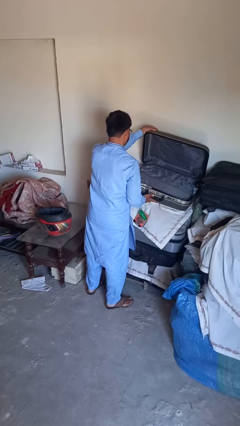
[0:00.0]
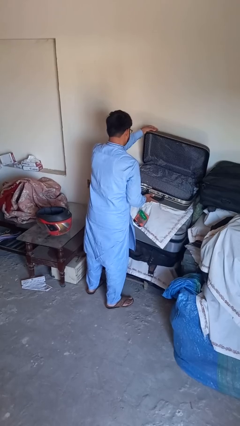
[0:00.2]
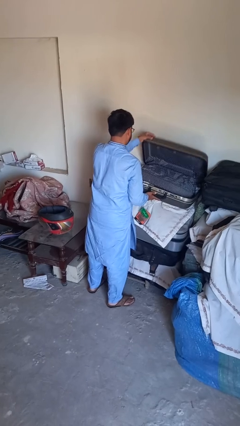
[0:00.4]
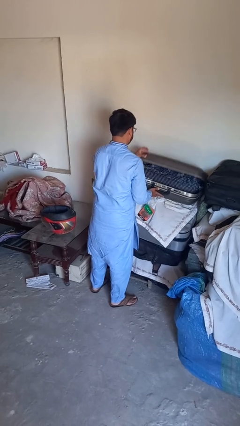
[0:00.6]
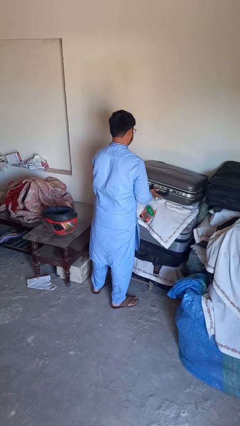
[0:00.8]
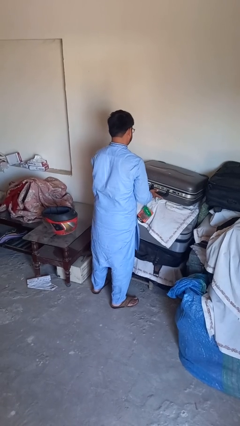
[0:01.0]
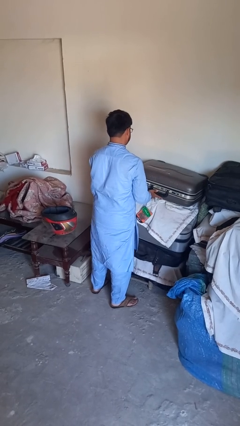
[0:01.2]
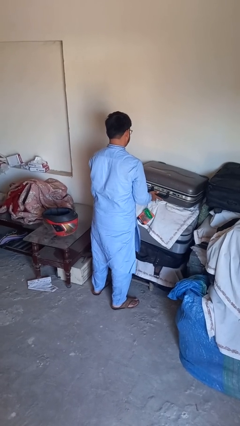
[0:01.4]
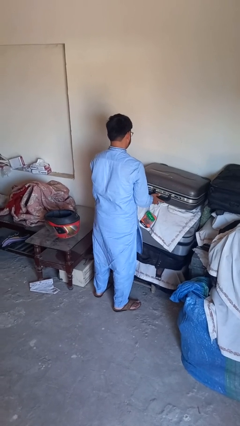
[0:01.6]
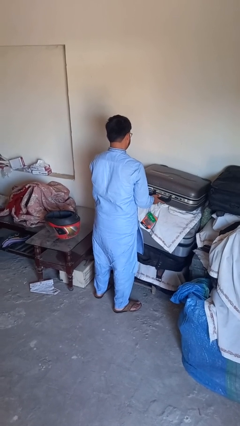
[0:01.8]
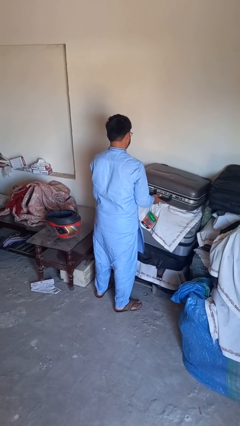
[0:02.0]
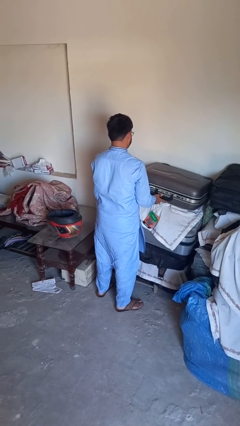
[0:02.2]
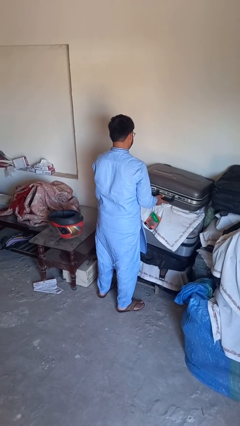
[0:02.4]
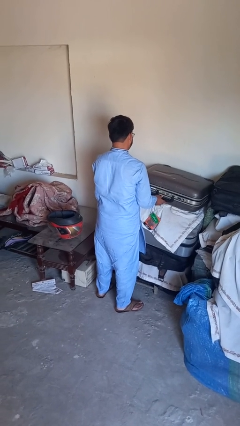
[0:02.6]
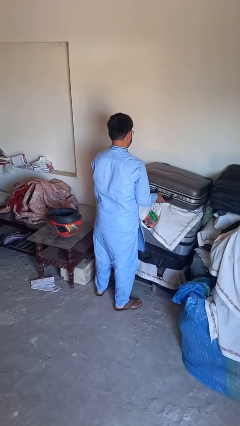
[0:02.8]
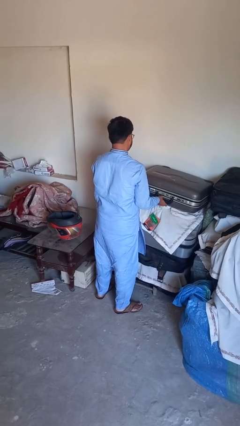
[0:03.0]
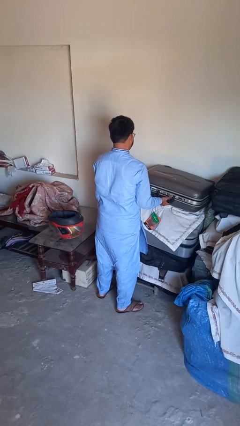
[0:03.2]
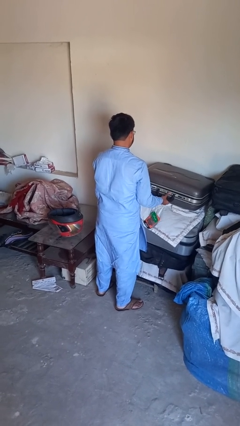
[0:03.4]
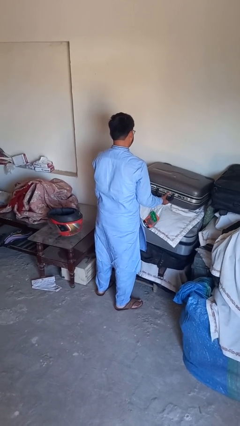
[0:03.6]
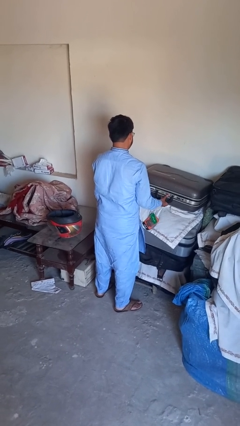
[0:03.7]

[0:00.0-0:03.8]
person closes suitcase

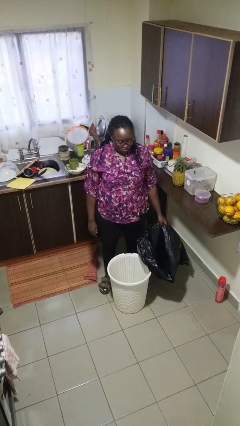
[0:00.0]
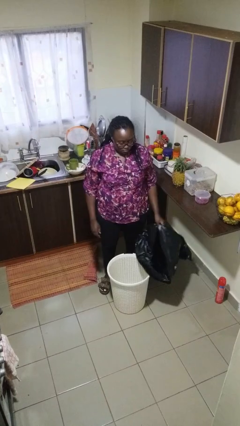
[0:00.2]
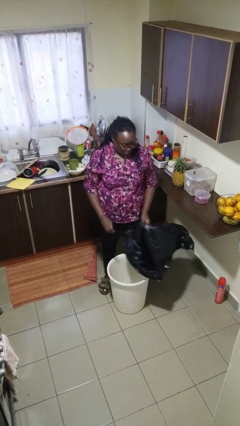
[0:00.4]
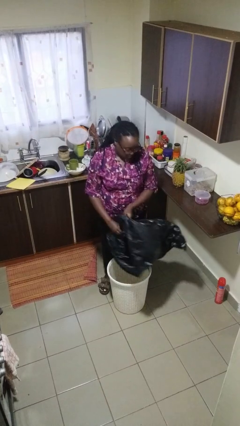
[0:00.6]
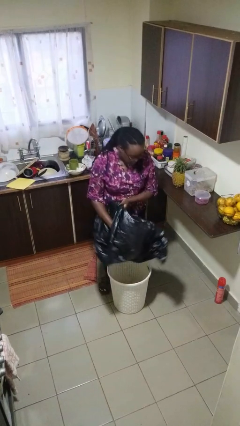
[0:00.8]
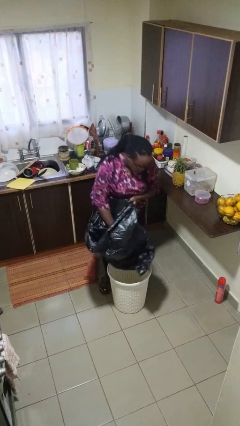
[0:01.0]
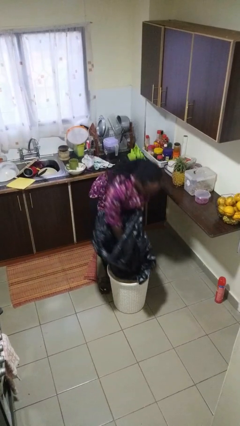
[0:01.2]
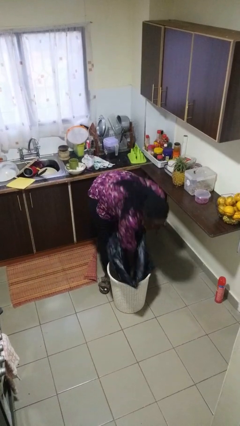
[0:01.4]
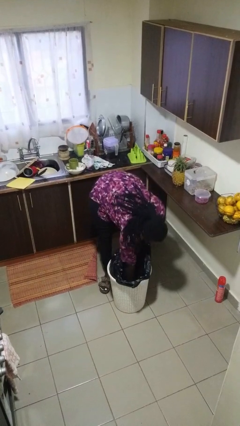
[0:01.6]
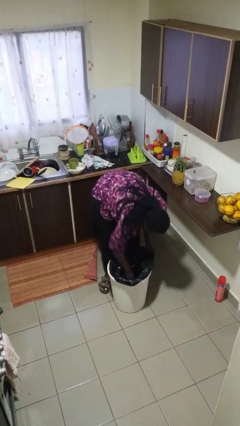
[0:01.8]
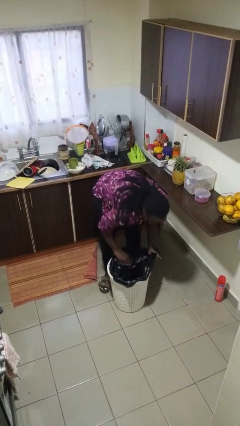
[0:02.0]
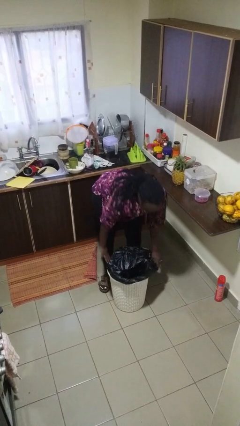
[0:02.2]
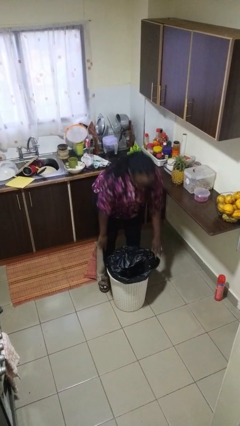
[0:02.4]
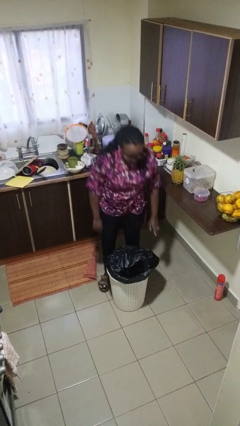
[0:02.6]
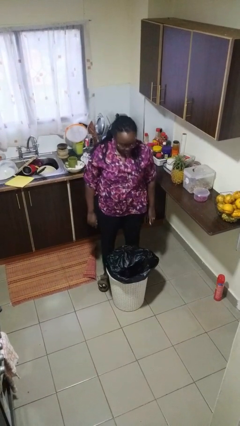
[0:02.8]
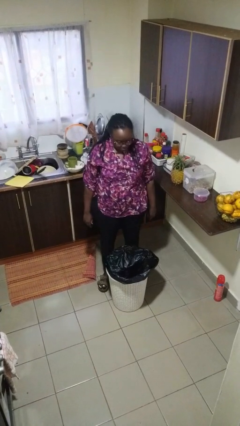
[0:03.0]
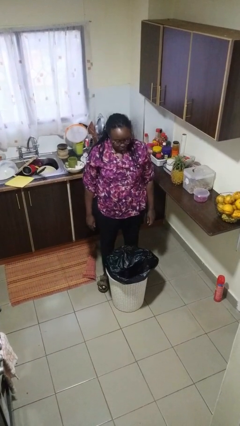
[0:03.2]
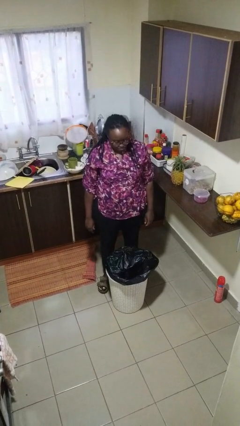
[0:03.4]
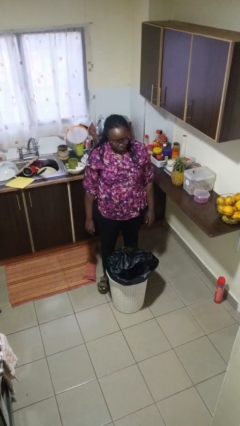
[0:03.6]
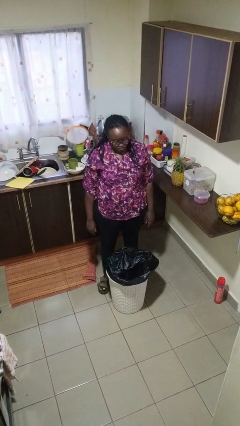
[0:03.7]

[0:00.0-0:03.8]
person removes trashbag from trashcan

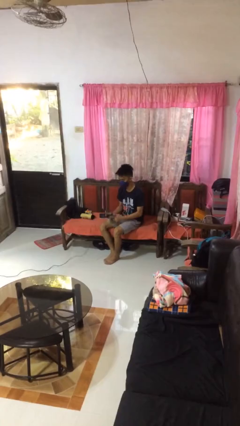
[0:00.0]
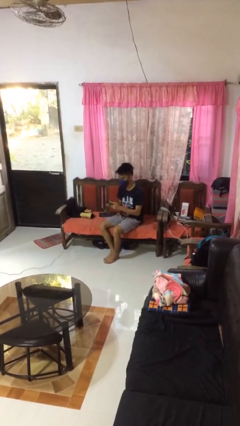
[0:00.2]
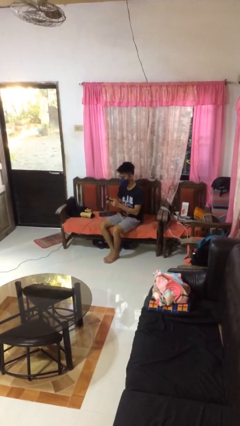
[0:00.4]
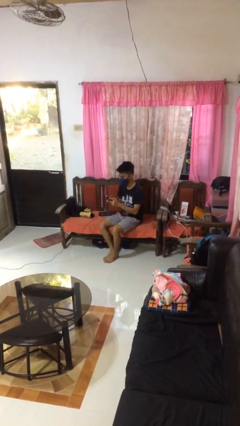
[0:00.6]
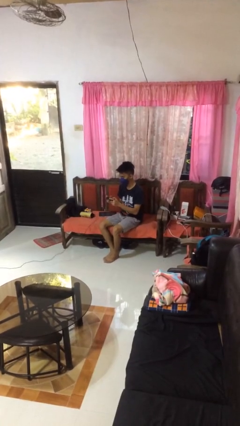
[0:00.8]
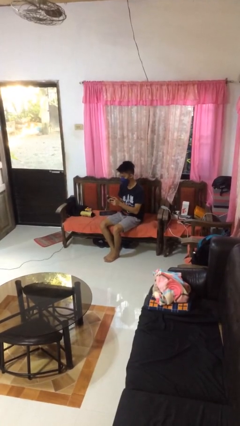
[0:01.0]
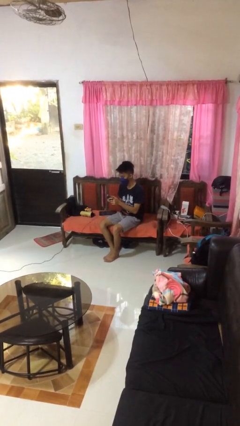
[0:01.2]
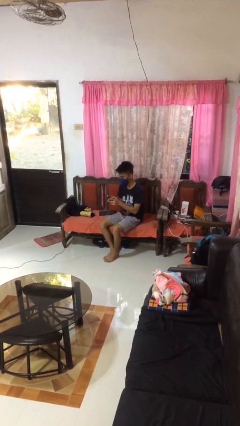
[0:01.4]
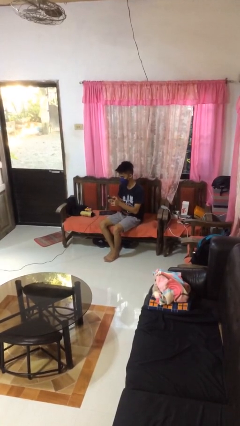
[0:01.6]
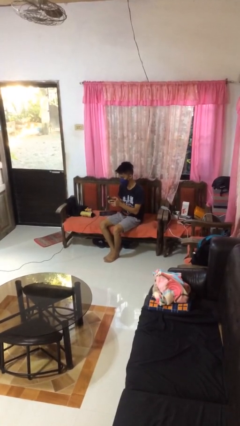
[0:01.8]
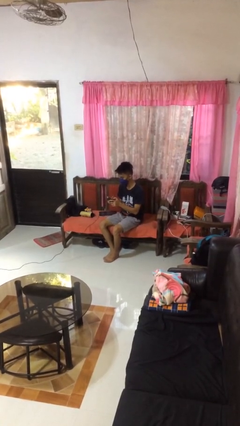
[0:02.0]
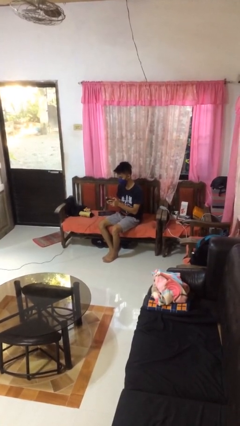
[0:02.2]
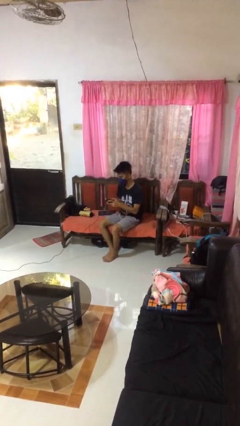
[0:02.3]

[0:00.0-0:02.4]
person interacts with handheld game

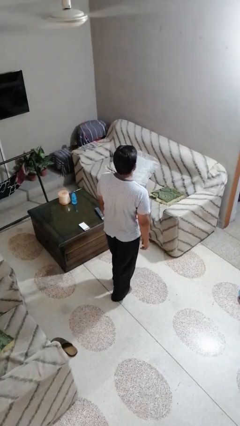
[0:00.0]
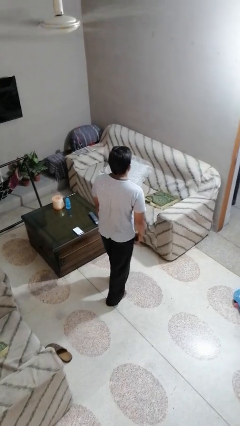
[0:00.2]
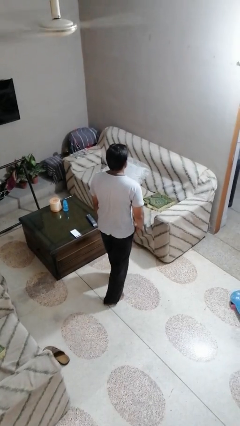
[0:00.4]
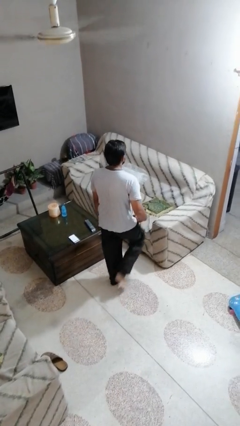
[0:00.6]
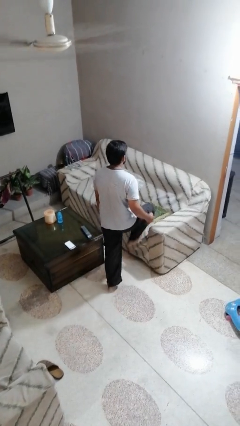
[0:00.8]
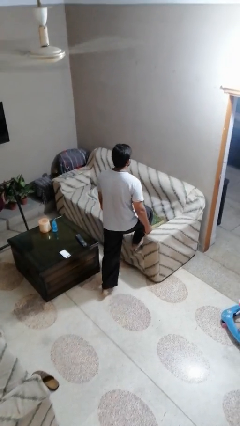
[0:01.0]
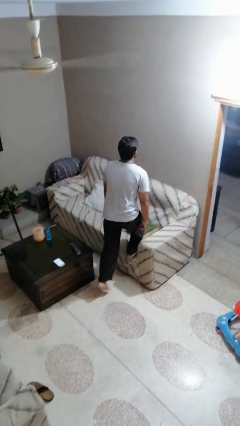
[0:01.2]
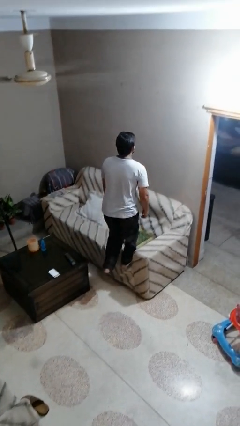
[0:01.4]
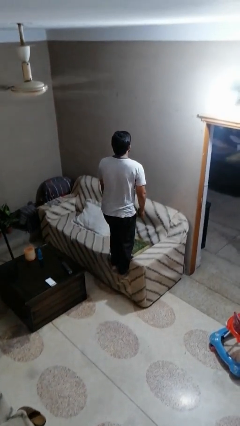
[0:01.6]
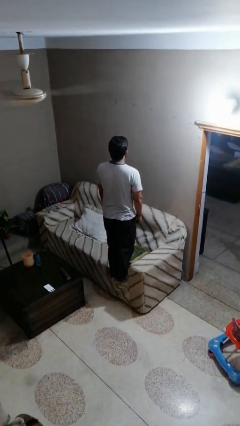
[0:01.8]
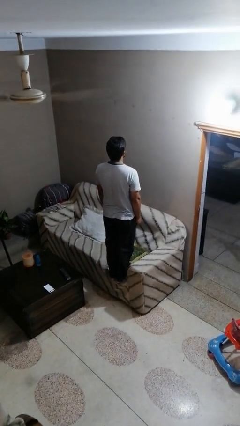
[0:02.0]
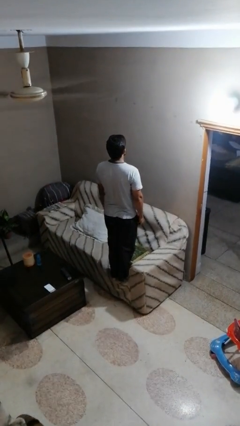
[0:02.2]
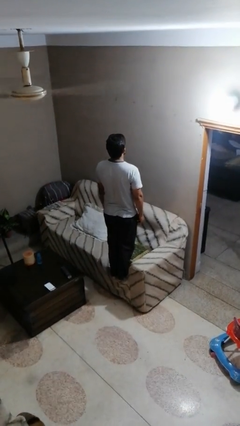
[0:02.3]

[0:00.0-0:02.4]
person climbs on couch

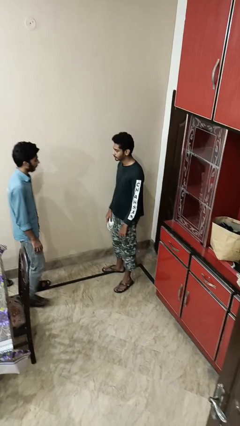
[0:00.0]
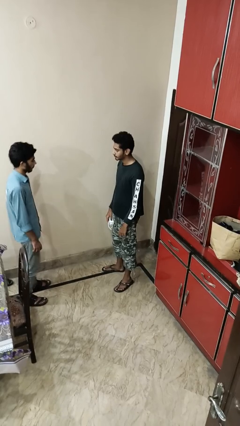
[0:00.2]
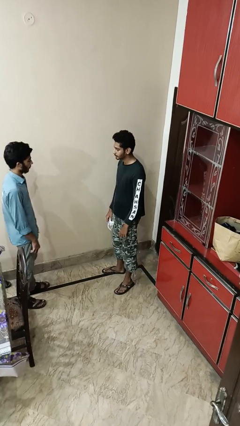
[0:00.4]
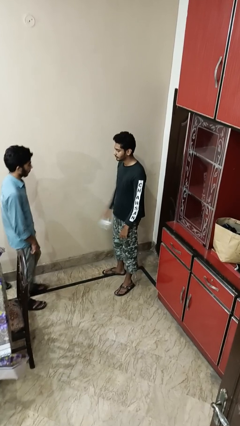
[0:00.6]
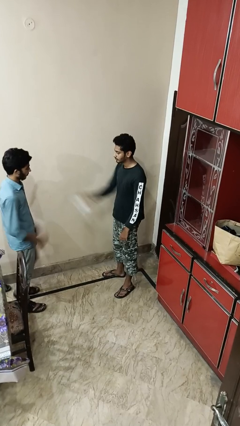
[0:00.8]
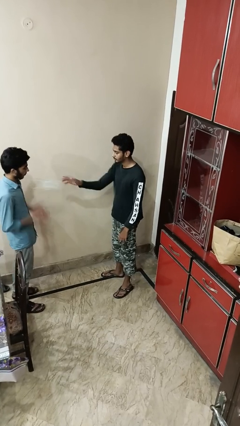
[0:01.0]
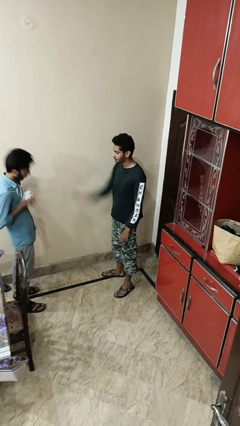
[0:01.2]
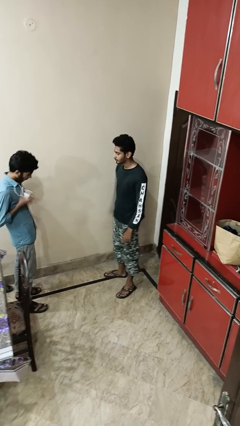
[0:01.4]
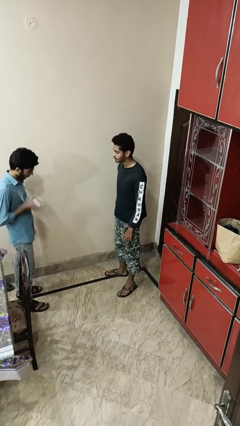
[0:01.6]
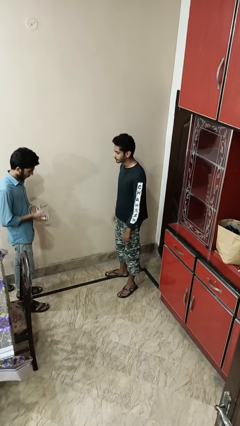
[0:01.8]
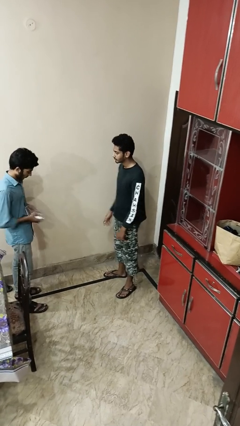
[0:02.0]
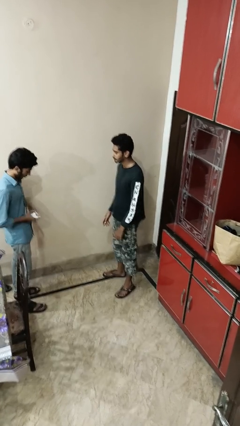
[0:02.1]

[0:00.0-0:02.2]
person throws object to person

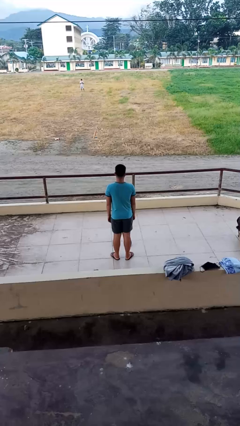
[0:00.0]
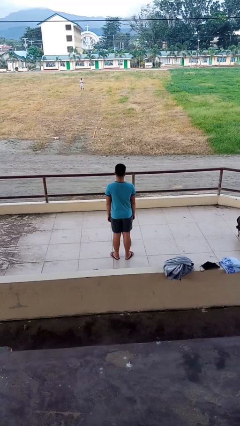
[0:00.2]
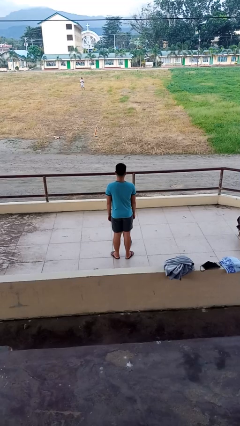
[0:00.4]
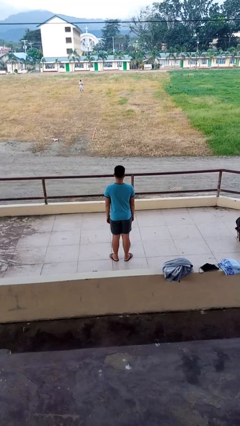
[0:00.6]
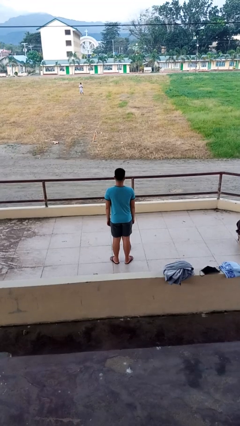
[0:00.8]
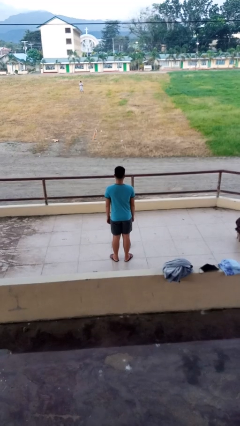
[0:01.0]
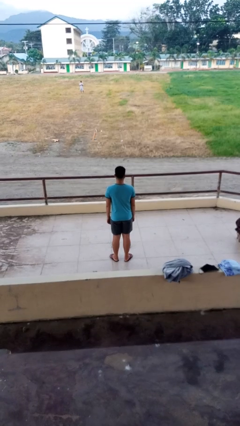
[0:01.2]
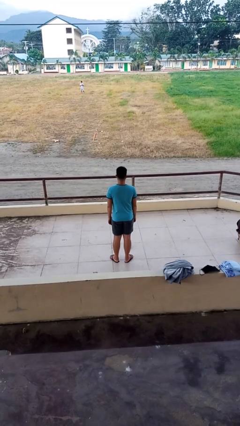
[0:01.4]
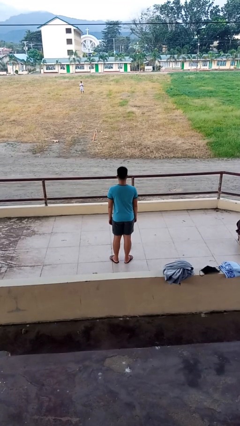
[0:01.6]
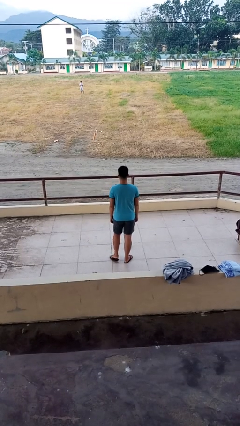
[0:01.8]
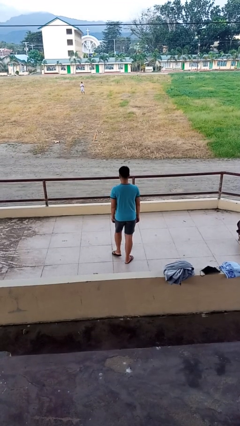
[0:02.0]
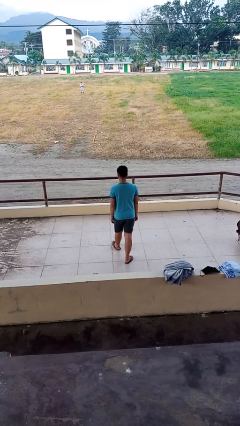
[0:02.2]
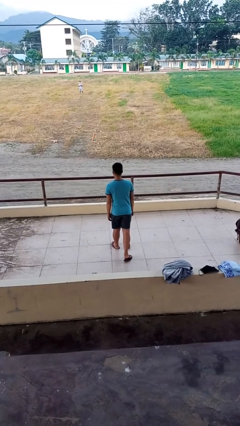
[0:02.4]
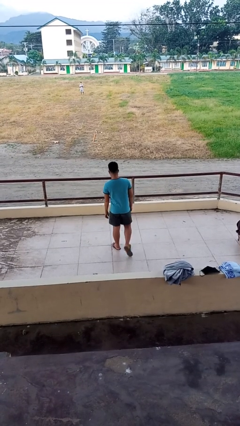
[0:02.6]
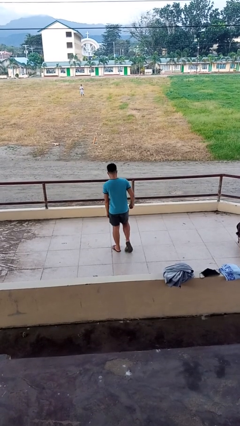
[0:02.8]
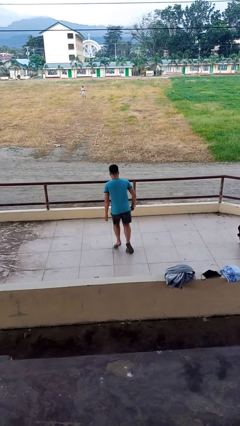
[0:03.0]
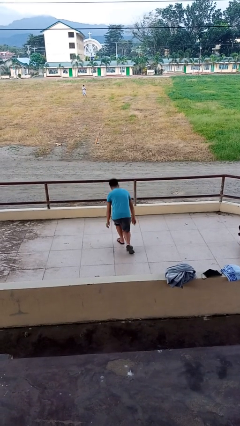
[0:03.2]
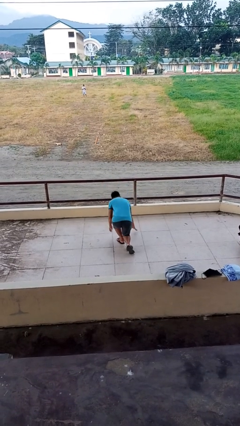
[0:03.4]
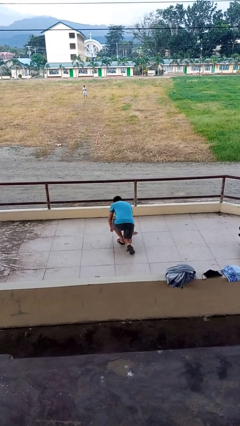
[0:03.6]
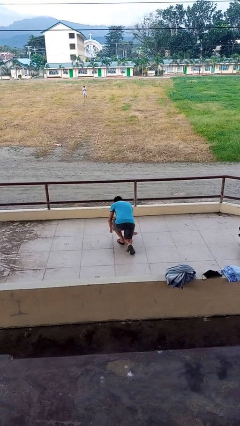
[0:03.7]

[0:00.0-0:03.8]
person trips on object on floor
